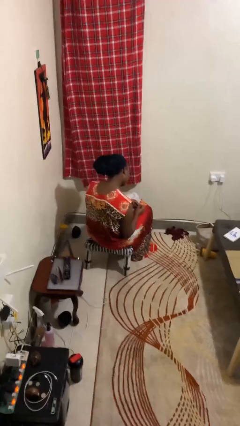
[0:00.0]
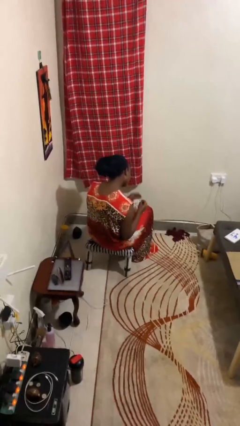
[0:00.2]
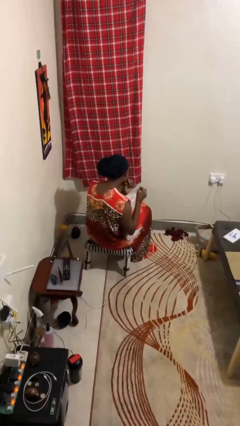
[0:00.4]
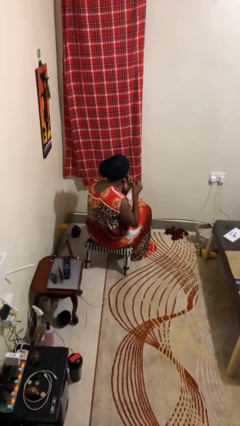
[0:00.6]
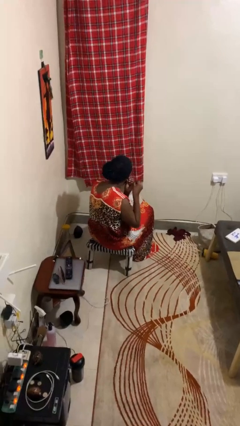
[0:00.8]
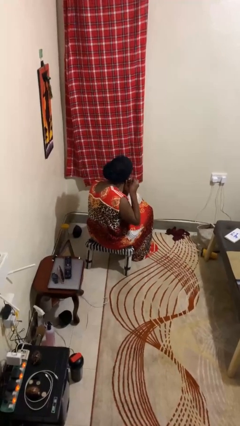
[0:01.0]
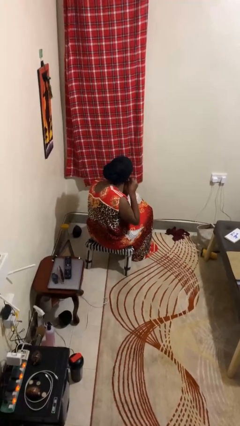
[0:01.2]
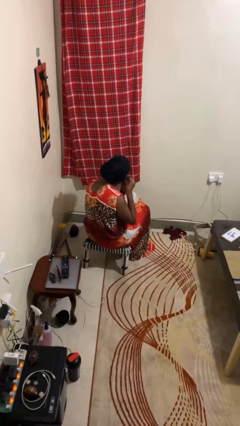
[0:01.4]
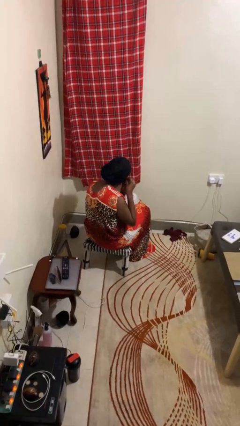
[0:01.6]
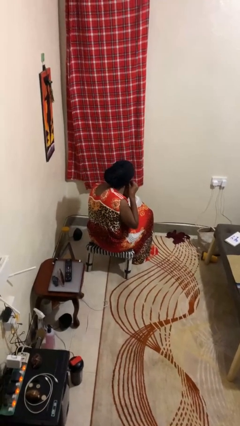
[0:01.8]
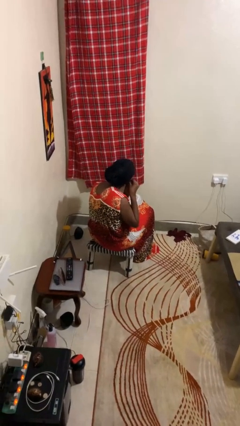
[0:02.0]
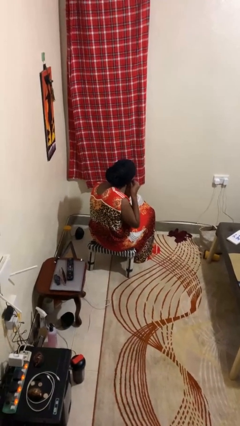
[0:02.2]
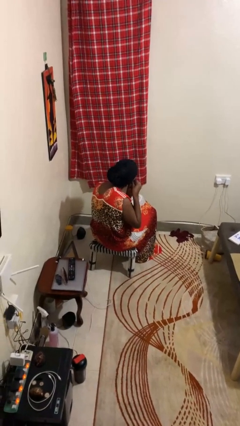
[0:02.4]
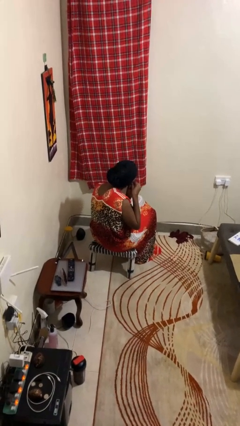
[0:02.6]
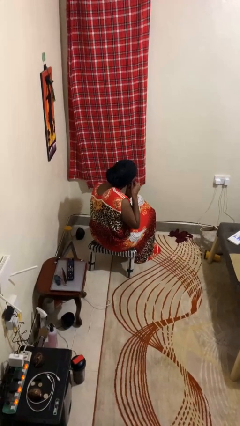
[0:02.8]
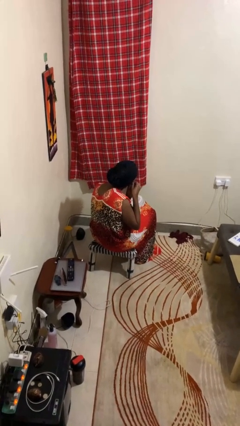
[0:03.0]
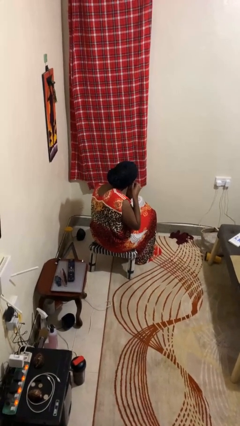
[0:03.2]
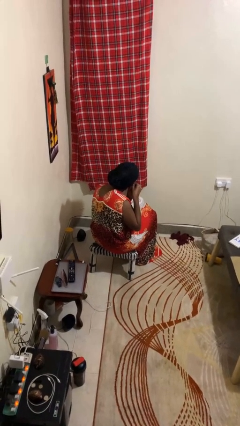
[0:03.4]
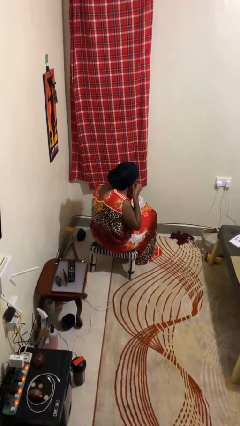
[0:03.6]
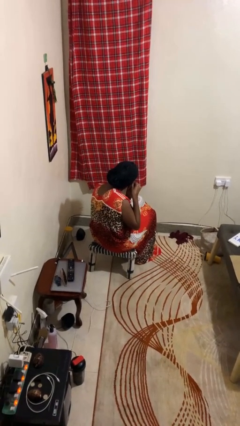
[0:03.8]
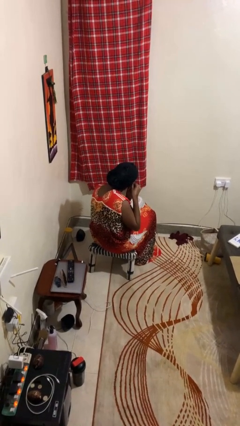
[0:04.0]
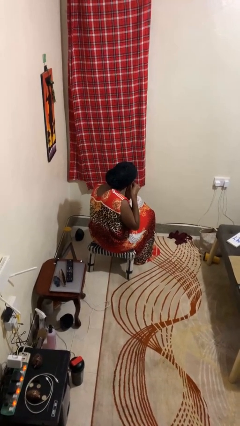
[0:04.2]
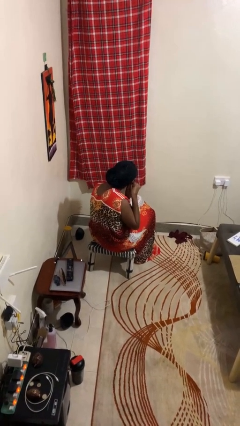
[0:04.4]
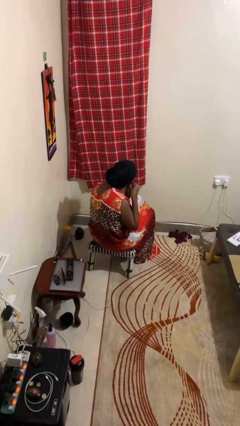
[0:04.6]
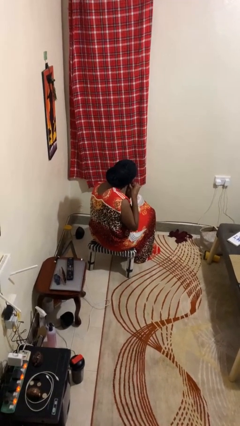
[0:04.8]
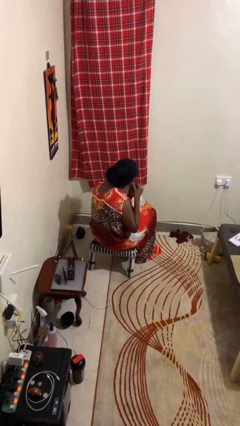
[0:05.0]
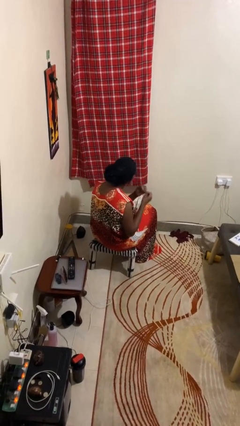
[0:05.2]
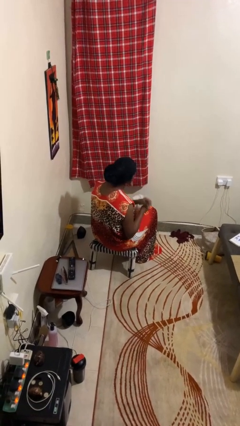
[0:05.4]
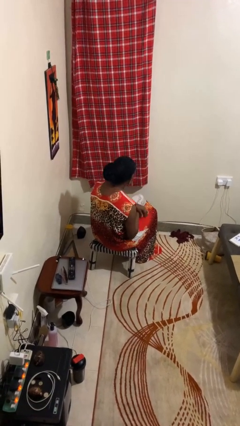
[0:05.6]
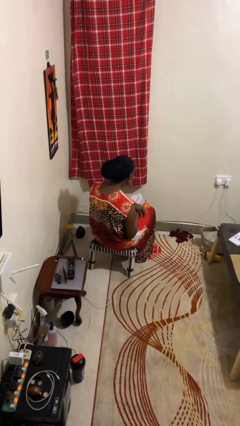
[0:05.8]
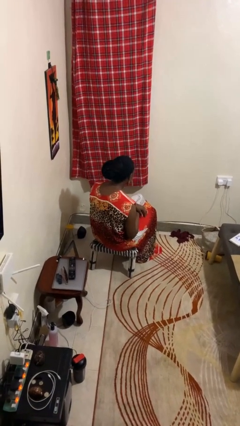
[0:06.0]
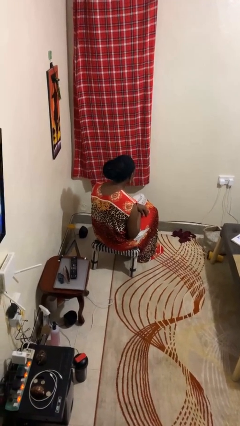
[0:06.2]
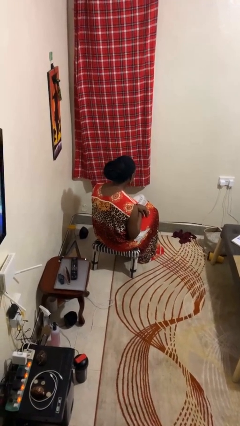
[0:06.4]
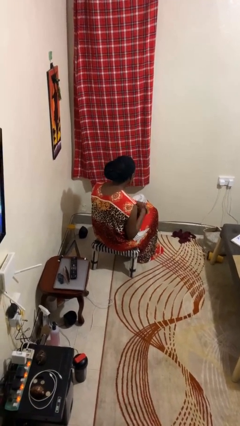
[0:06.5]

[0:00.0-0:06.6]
person puts on earrings

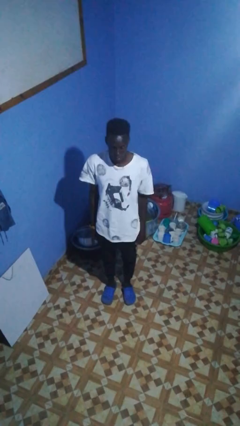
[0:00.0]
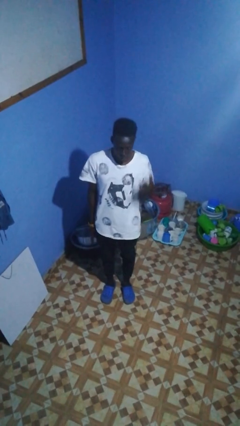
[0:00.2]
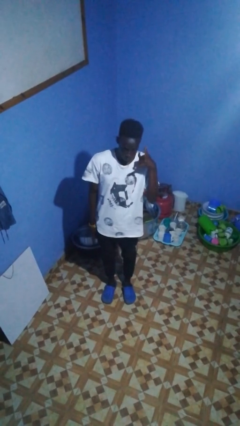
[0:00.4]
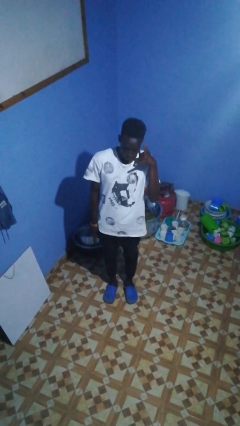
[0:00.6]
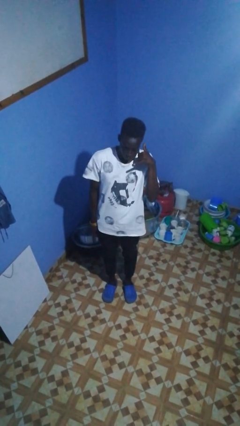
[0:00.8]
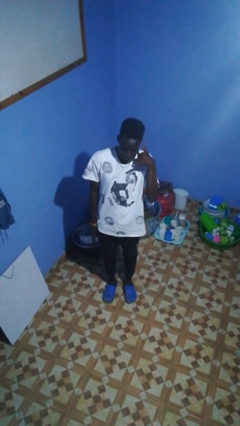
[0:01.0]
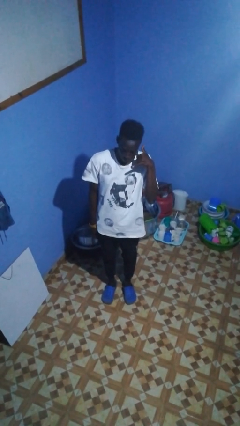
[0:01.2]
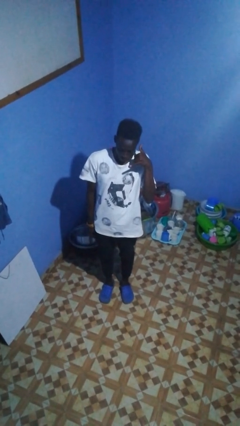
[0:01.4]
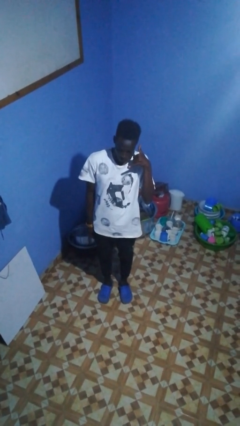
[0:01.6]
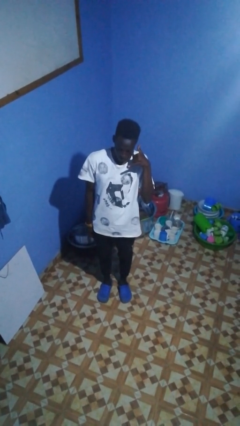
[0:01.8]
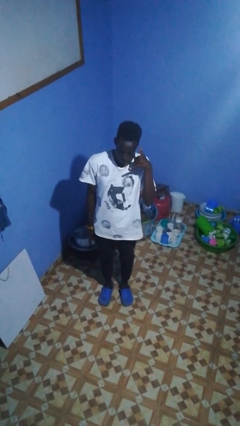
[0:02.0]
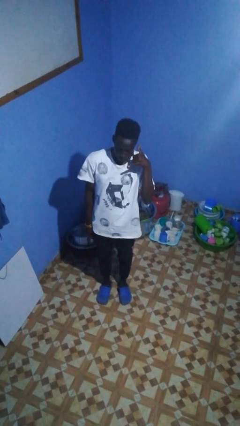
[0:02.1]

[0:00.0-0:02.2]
person gestures call me

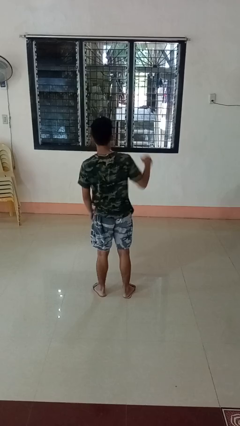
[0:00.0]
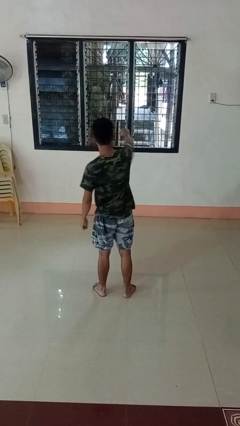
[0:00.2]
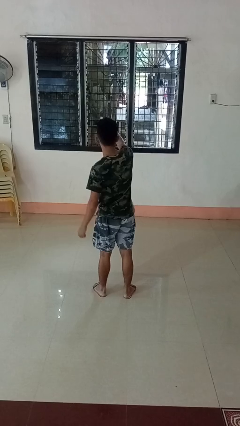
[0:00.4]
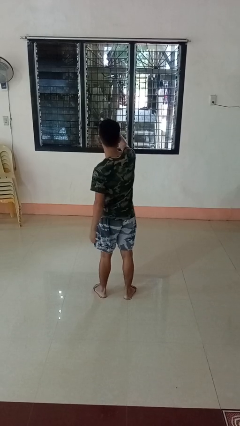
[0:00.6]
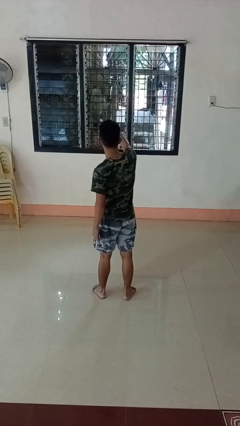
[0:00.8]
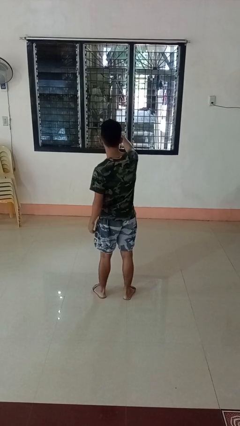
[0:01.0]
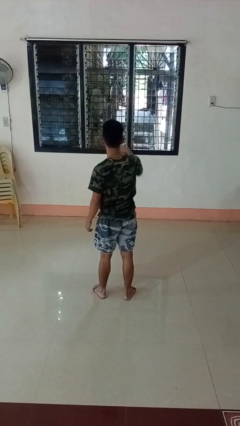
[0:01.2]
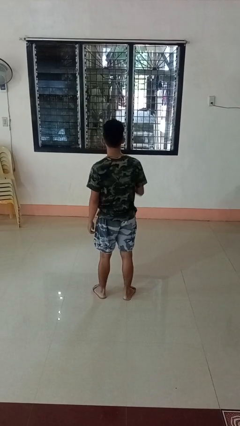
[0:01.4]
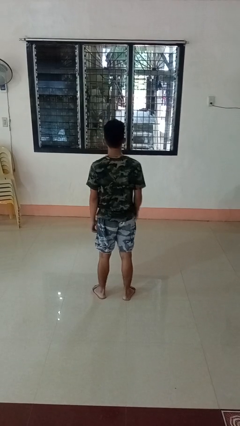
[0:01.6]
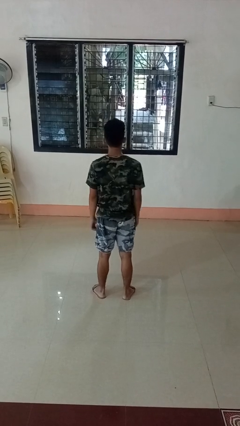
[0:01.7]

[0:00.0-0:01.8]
person punches

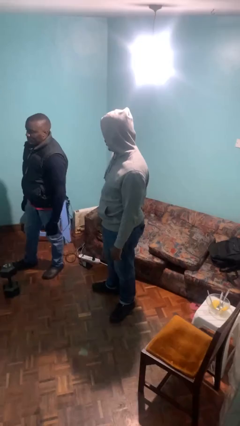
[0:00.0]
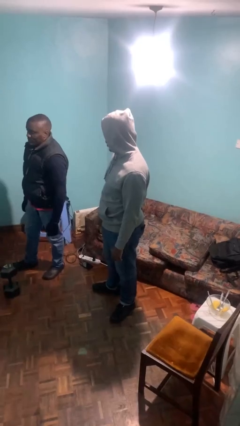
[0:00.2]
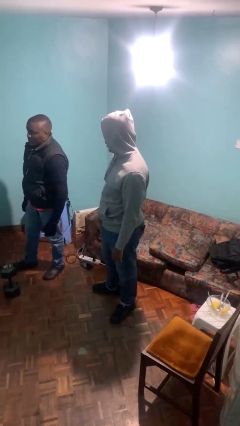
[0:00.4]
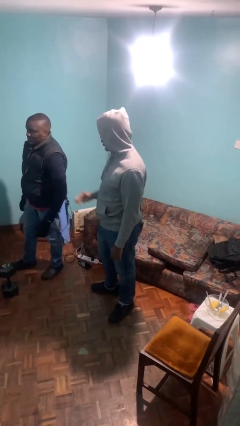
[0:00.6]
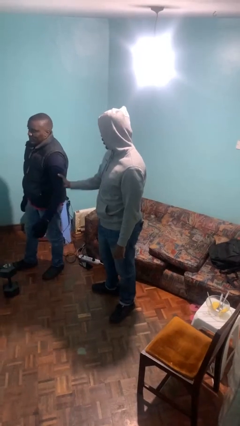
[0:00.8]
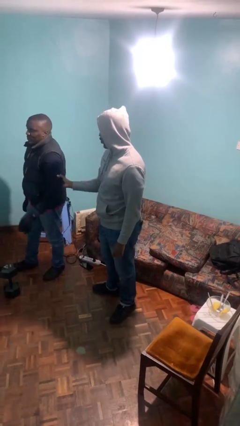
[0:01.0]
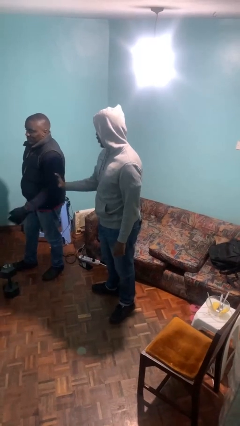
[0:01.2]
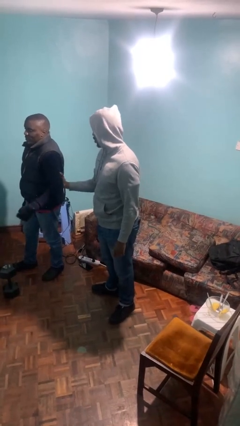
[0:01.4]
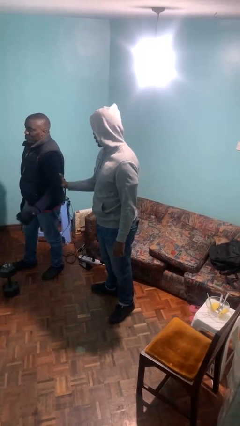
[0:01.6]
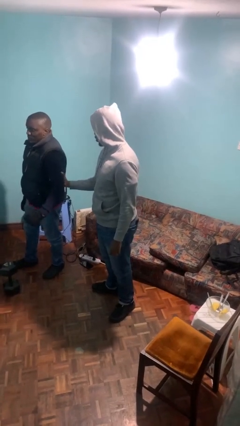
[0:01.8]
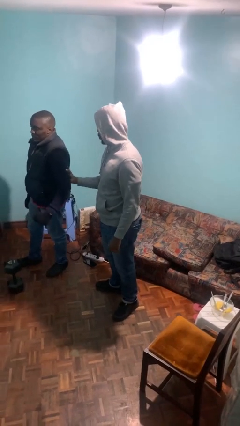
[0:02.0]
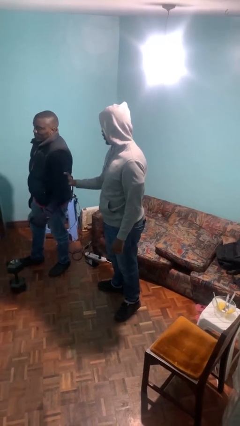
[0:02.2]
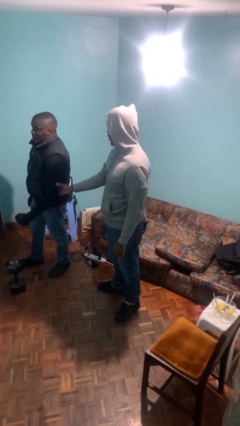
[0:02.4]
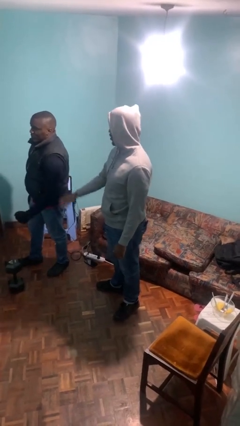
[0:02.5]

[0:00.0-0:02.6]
person grabs person by bicep

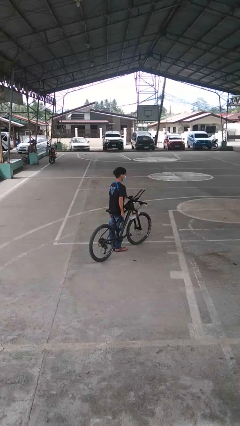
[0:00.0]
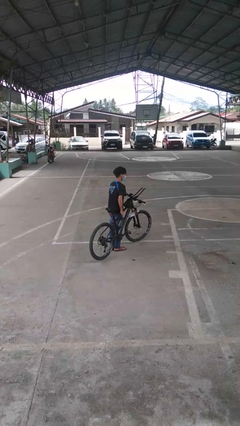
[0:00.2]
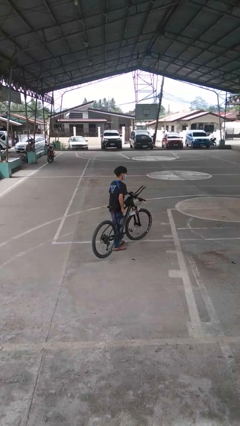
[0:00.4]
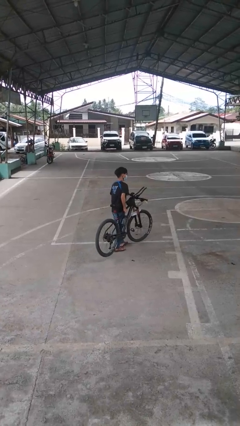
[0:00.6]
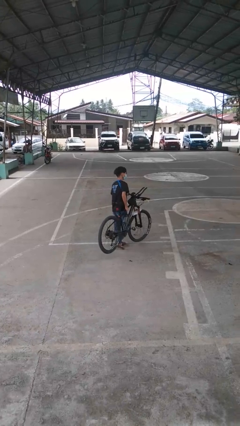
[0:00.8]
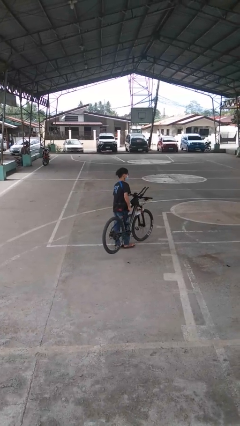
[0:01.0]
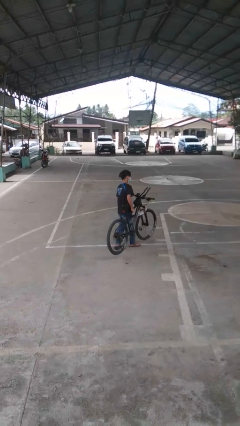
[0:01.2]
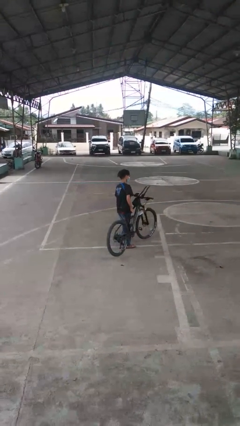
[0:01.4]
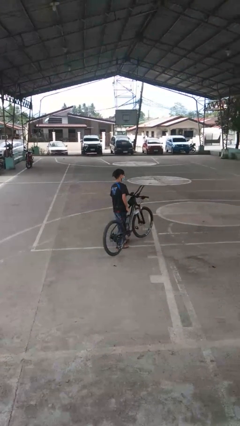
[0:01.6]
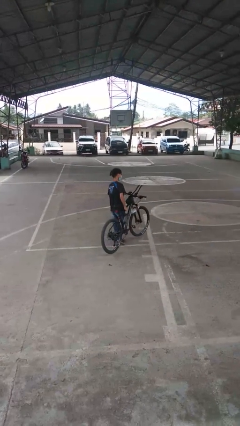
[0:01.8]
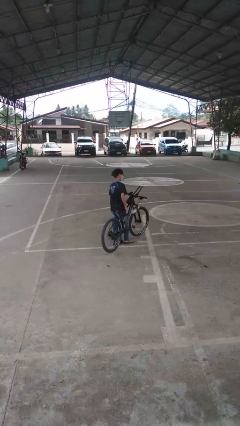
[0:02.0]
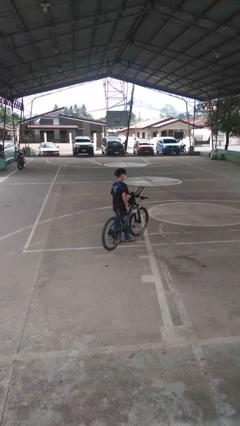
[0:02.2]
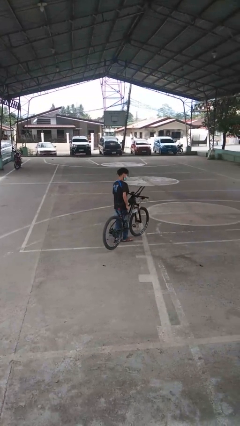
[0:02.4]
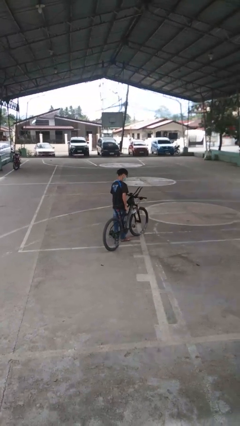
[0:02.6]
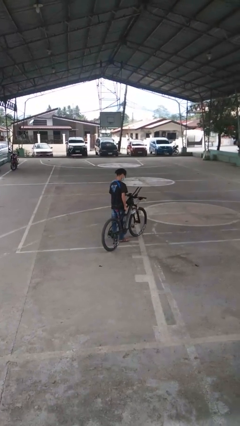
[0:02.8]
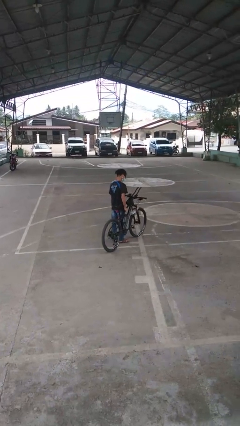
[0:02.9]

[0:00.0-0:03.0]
person carries bicycle

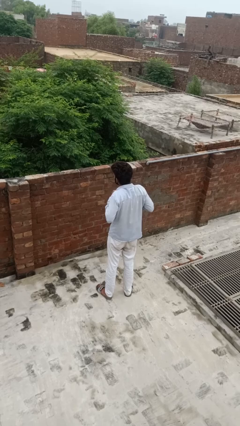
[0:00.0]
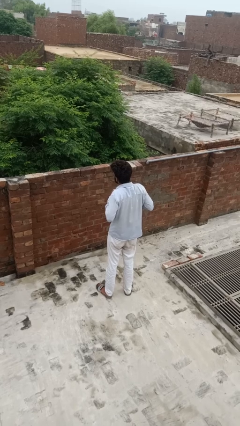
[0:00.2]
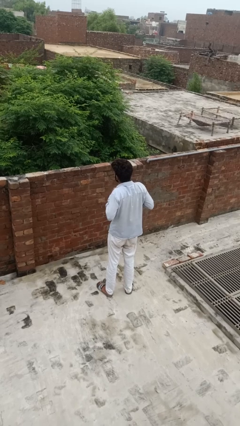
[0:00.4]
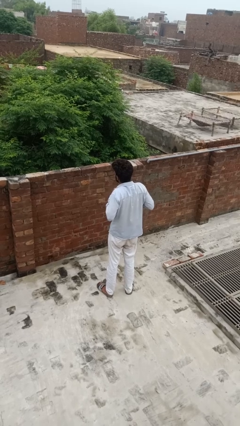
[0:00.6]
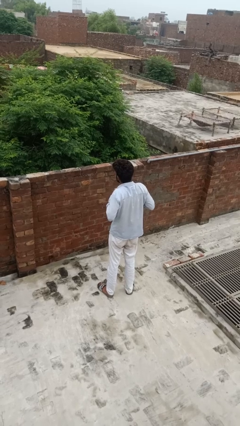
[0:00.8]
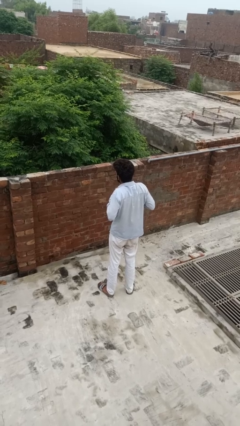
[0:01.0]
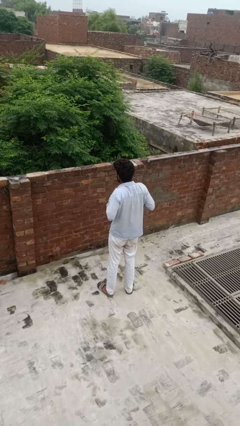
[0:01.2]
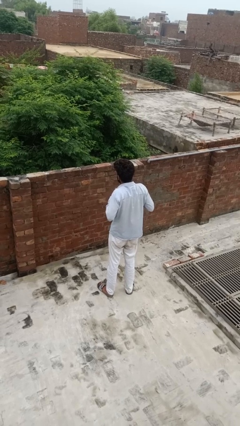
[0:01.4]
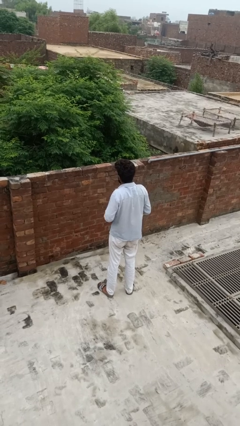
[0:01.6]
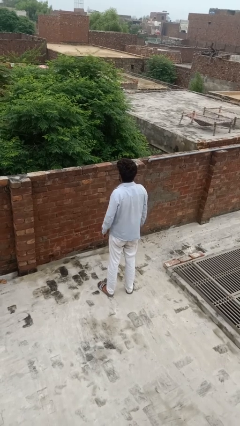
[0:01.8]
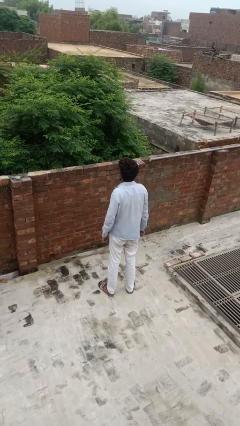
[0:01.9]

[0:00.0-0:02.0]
person cracks knuckles
